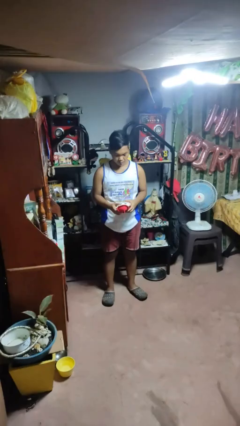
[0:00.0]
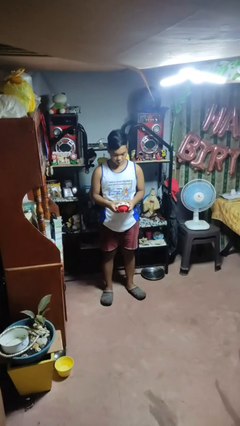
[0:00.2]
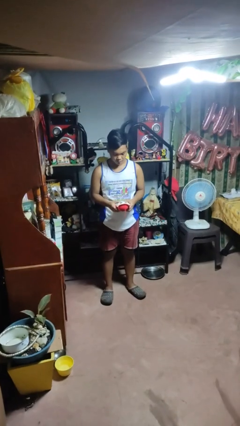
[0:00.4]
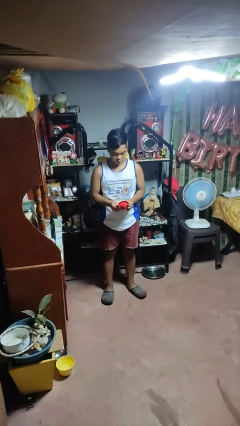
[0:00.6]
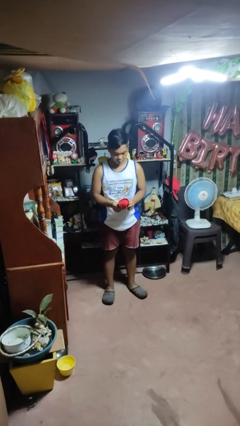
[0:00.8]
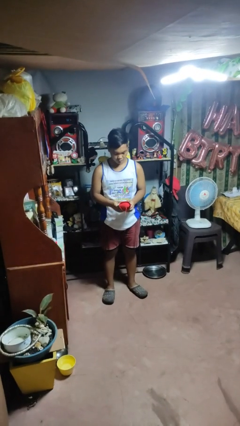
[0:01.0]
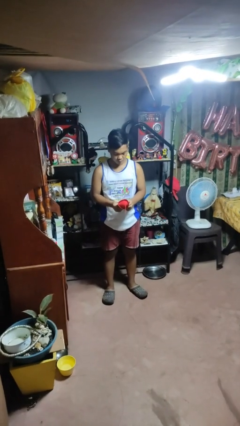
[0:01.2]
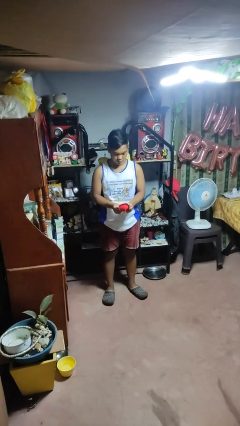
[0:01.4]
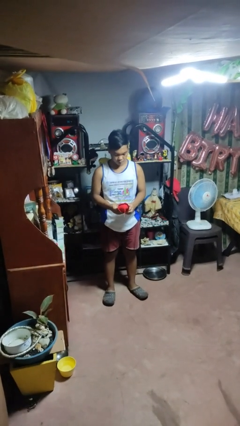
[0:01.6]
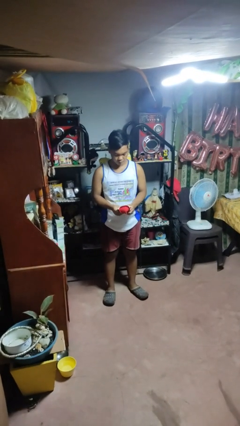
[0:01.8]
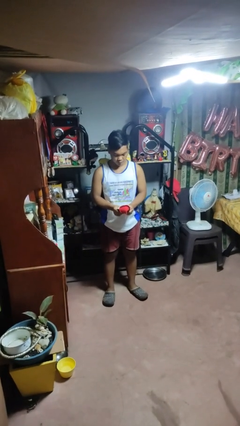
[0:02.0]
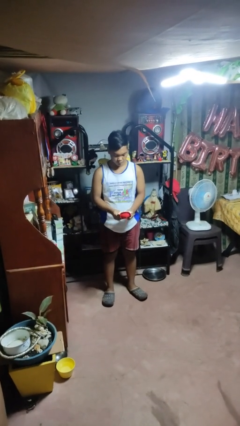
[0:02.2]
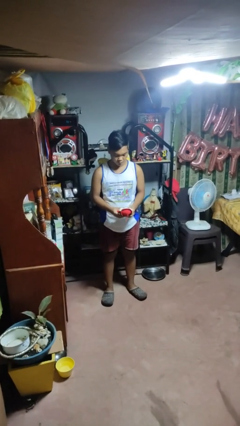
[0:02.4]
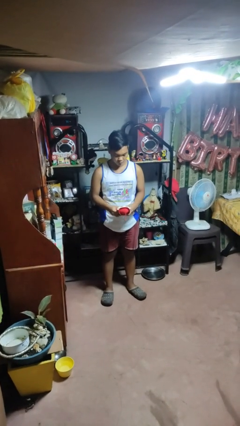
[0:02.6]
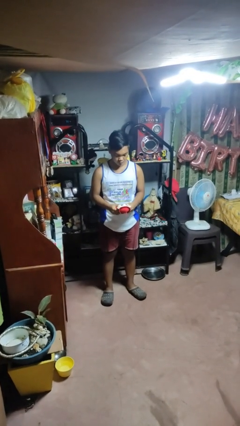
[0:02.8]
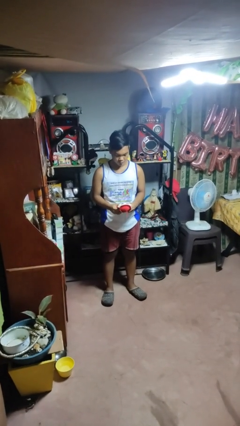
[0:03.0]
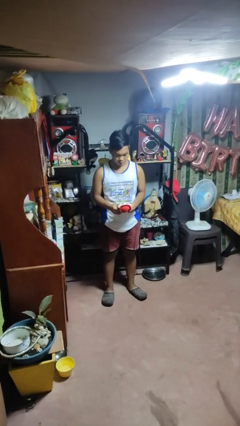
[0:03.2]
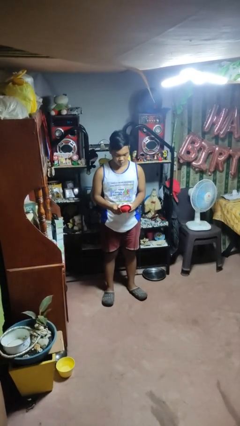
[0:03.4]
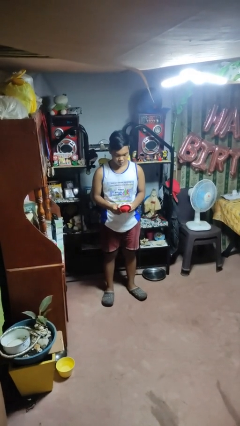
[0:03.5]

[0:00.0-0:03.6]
person squeezes object

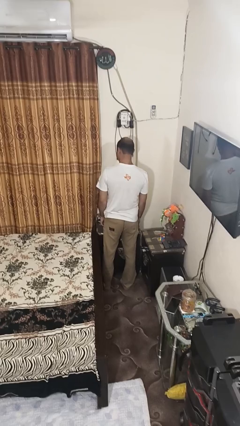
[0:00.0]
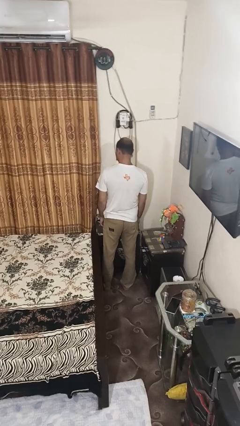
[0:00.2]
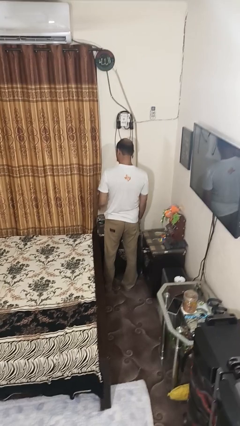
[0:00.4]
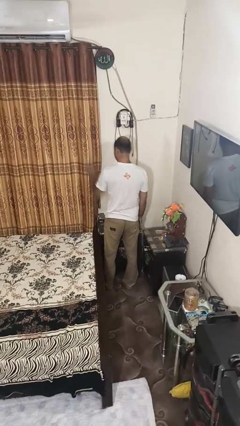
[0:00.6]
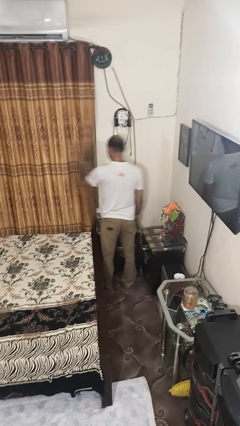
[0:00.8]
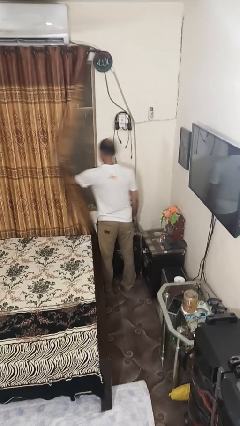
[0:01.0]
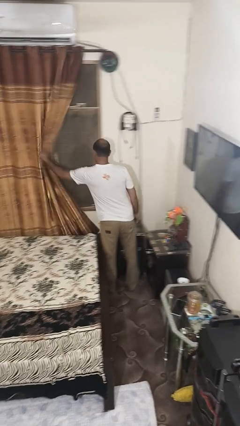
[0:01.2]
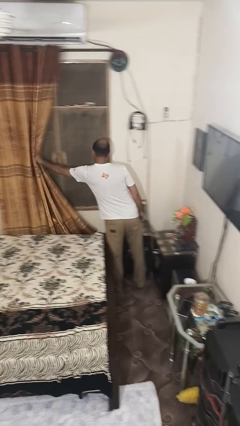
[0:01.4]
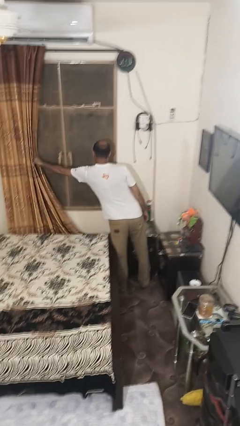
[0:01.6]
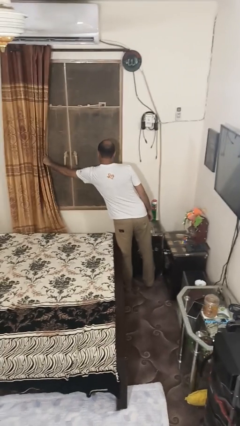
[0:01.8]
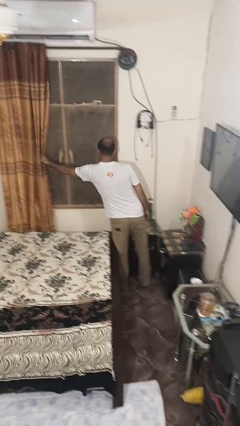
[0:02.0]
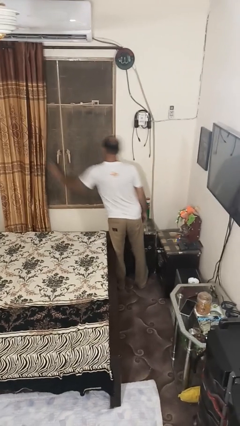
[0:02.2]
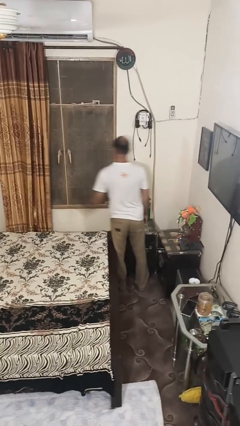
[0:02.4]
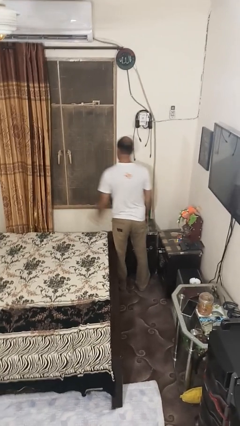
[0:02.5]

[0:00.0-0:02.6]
person opens curtains

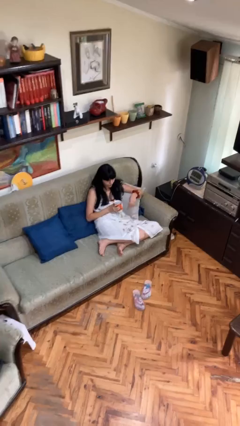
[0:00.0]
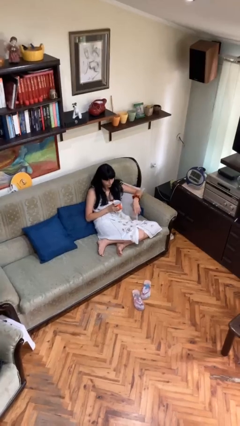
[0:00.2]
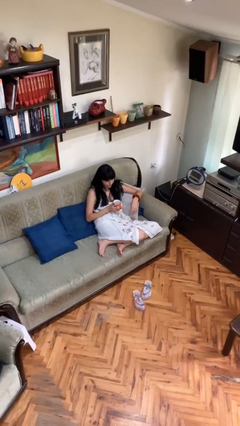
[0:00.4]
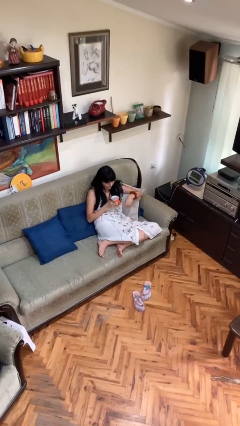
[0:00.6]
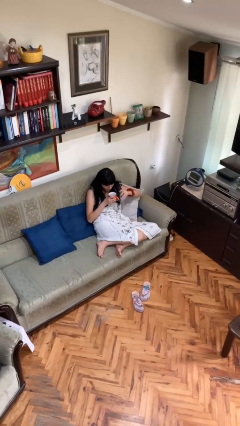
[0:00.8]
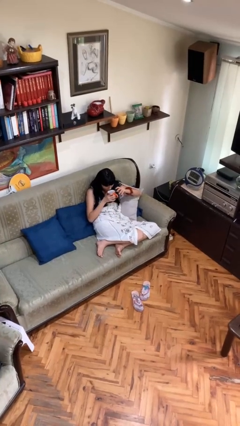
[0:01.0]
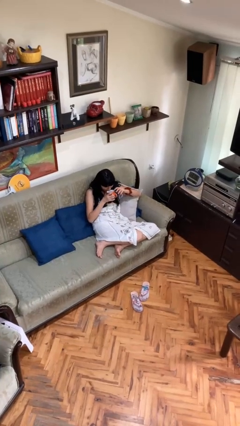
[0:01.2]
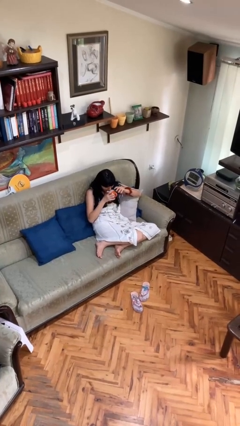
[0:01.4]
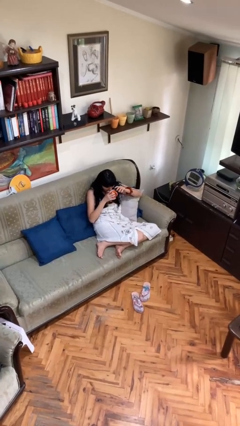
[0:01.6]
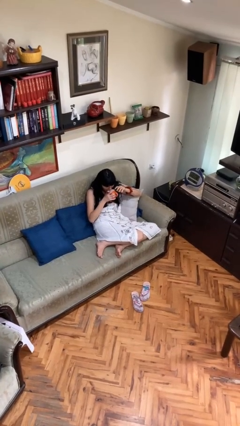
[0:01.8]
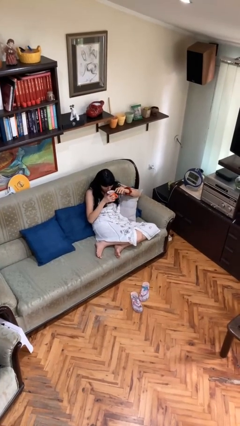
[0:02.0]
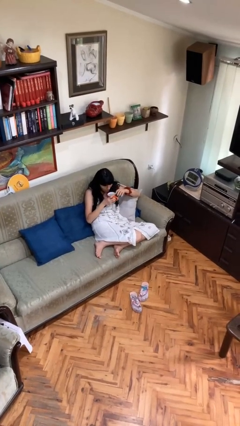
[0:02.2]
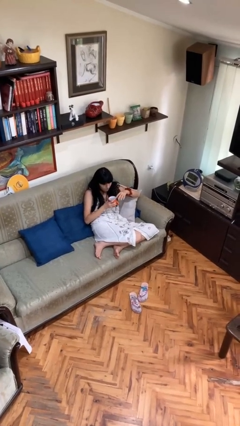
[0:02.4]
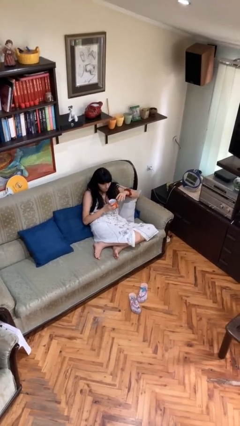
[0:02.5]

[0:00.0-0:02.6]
person drinks from mug

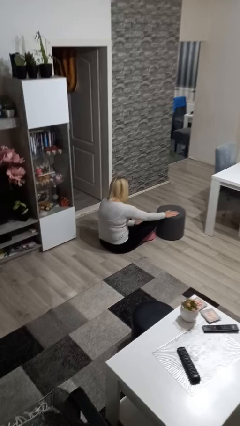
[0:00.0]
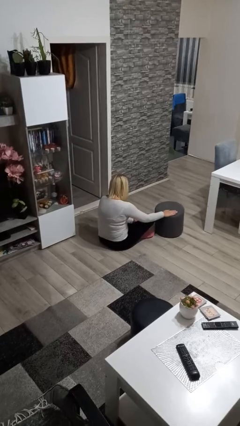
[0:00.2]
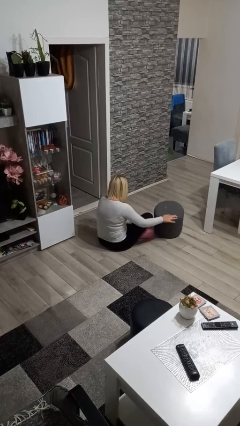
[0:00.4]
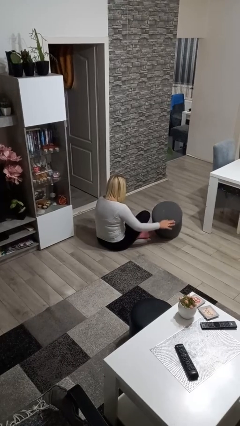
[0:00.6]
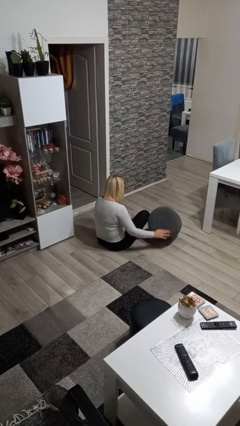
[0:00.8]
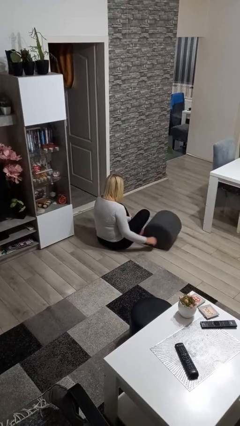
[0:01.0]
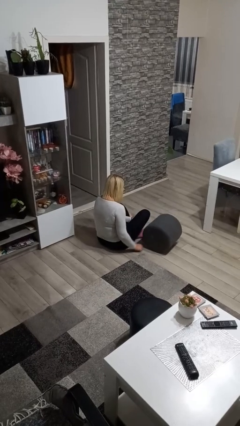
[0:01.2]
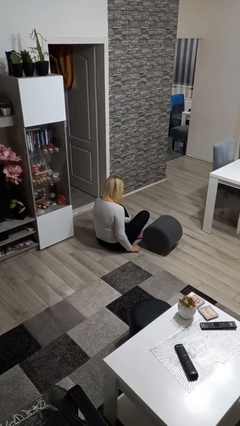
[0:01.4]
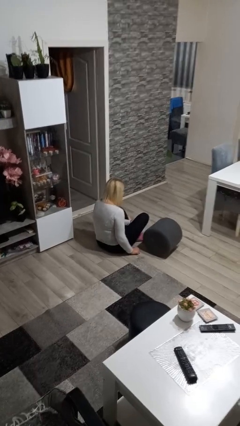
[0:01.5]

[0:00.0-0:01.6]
person knocks over furniture

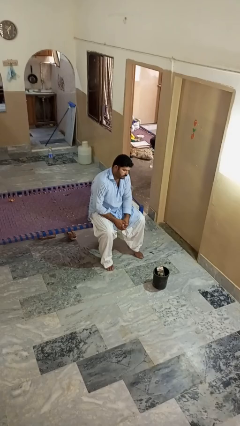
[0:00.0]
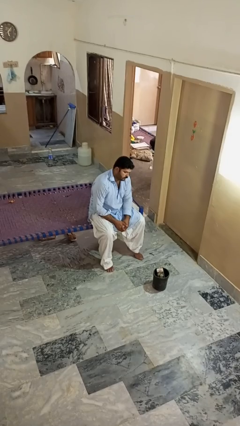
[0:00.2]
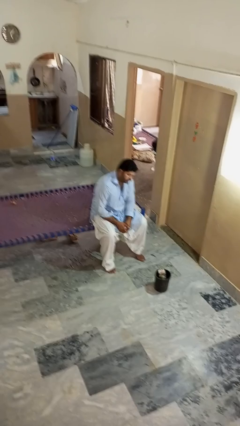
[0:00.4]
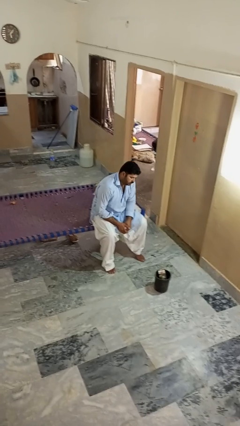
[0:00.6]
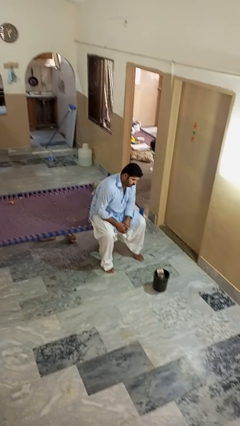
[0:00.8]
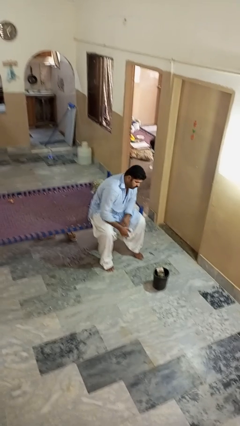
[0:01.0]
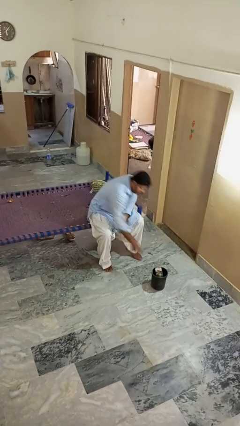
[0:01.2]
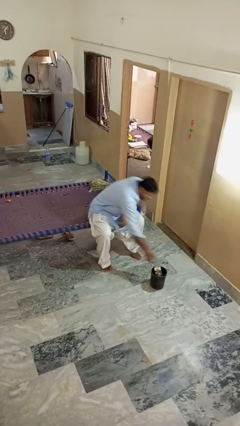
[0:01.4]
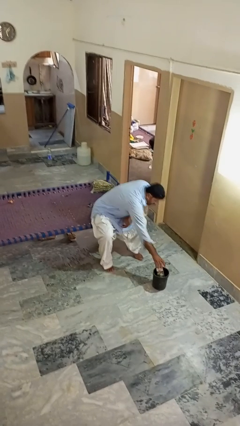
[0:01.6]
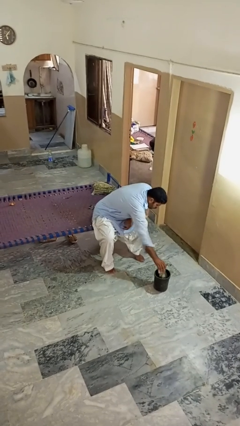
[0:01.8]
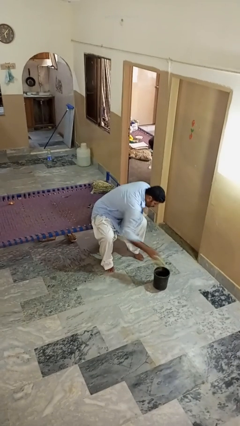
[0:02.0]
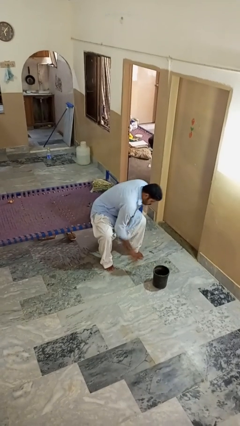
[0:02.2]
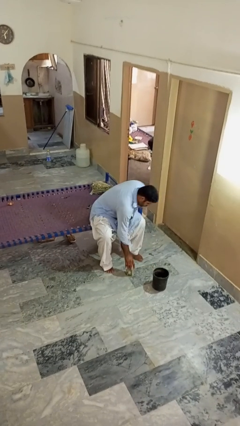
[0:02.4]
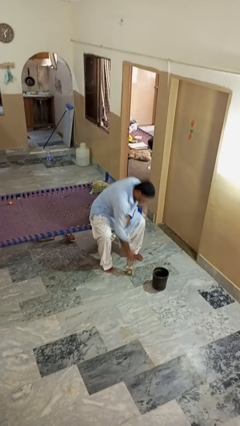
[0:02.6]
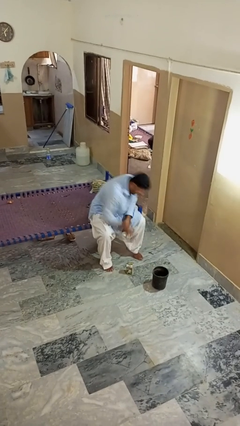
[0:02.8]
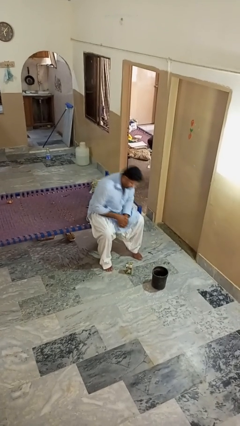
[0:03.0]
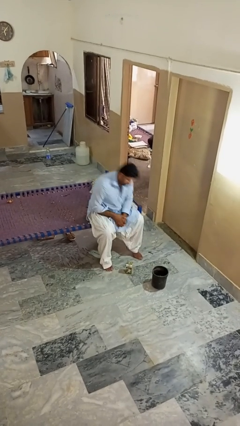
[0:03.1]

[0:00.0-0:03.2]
person takes object from basket

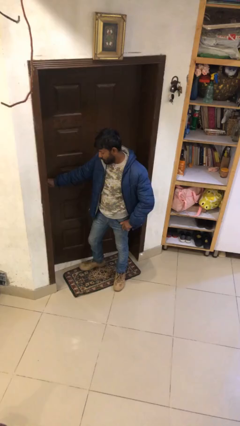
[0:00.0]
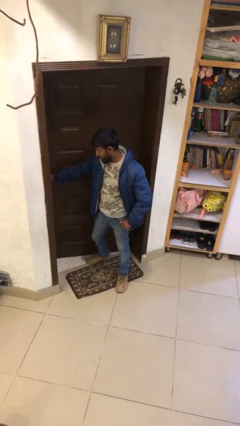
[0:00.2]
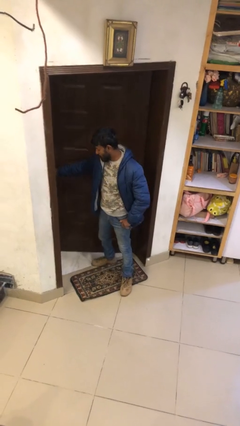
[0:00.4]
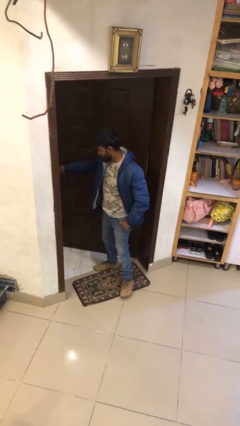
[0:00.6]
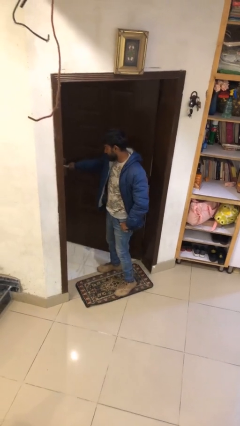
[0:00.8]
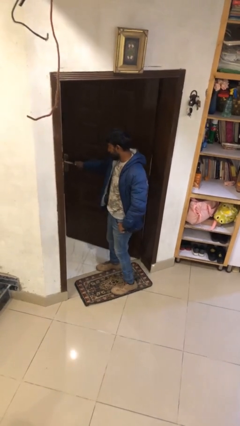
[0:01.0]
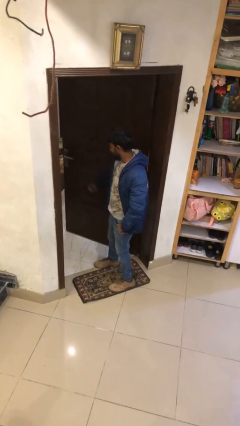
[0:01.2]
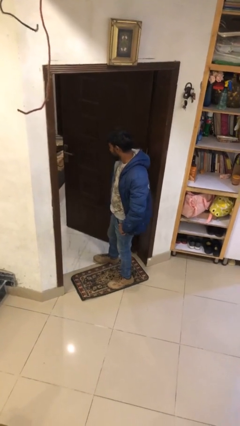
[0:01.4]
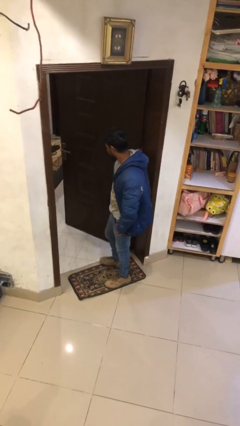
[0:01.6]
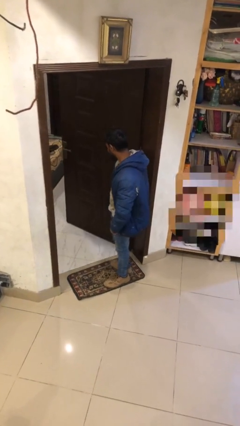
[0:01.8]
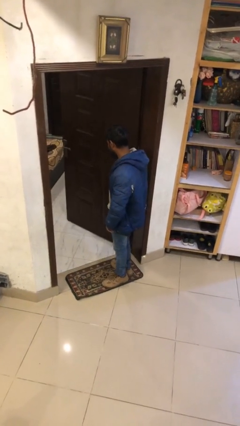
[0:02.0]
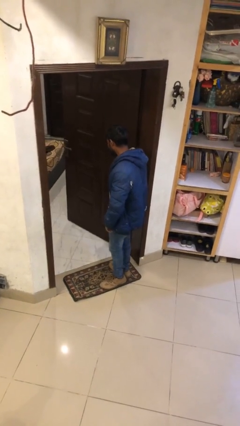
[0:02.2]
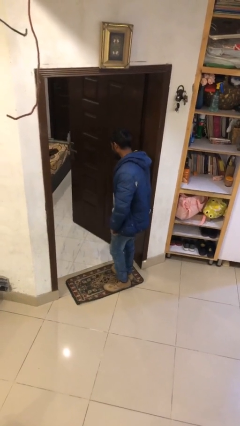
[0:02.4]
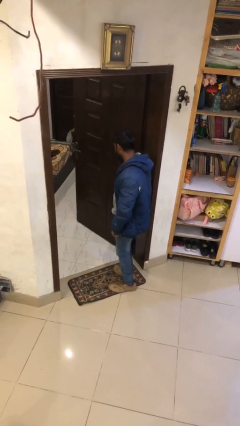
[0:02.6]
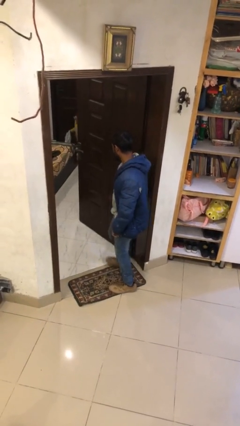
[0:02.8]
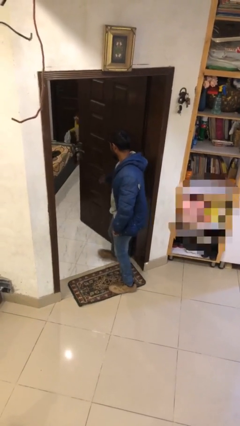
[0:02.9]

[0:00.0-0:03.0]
person opens facility door

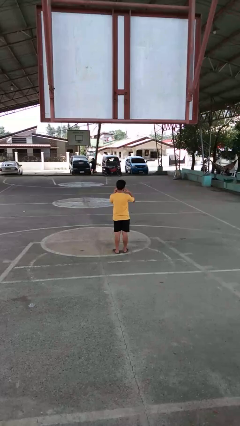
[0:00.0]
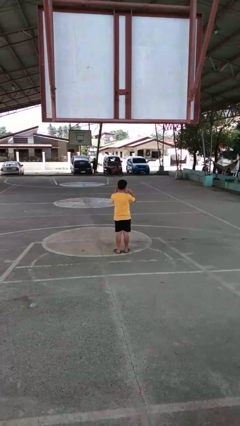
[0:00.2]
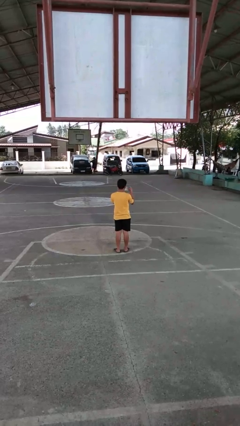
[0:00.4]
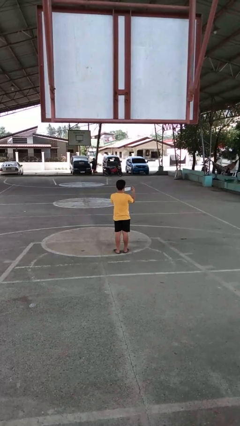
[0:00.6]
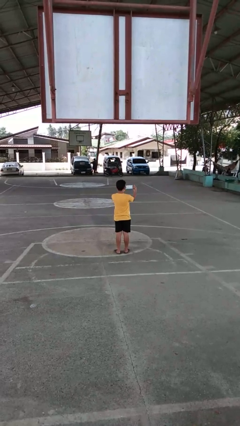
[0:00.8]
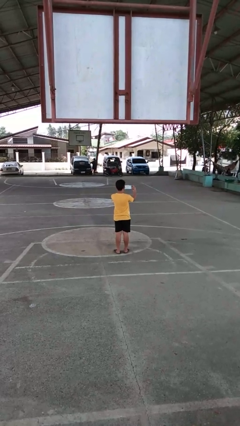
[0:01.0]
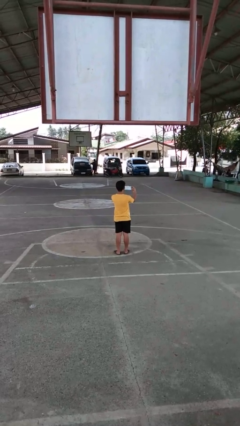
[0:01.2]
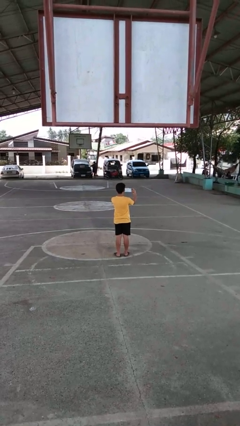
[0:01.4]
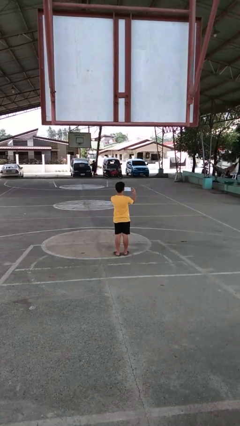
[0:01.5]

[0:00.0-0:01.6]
person takes off facemask
